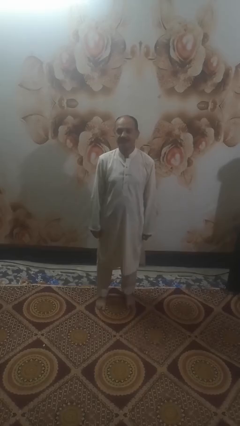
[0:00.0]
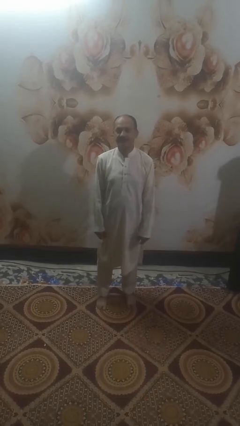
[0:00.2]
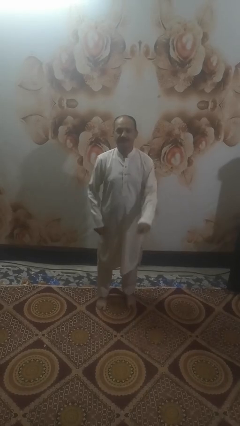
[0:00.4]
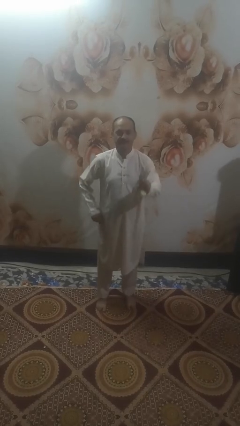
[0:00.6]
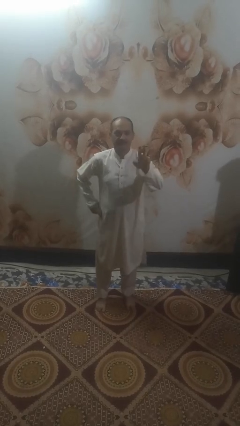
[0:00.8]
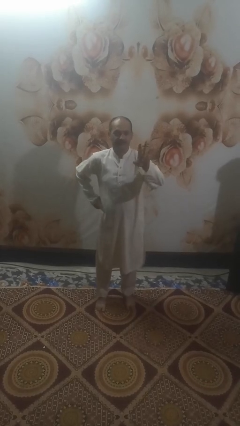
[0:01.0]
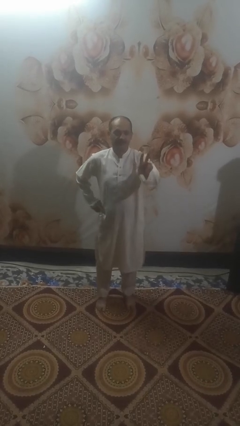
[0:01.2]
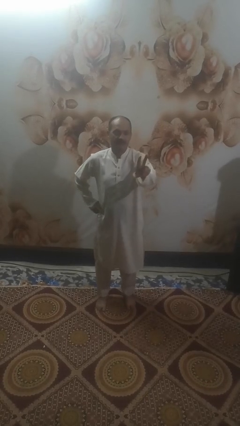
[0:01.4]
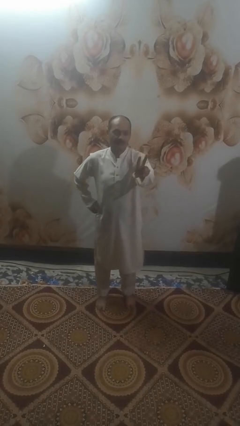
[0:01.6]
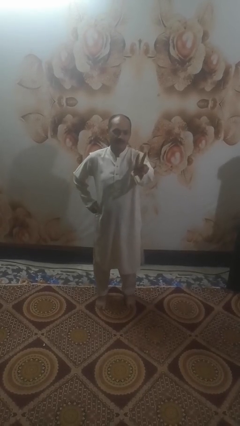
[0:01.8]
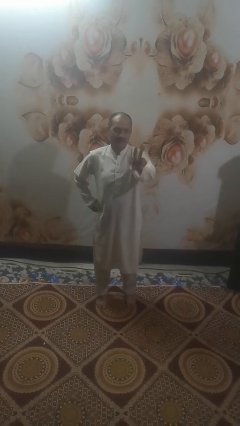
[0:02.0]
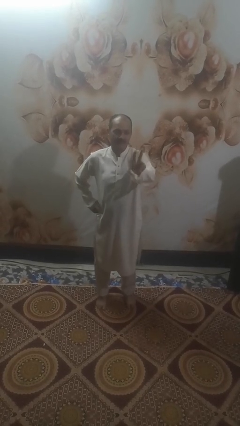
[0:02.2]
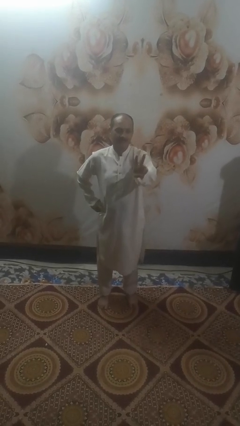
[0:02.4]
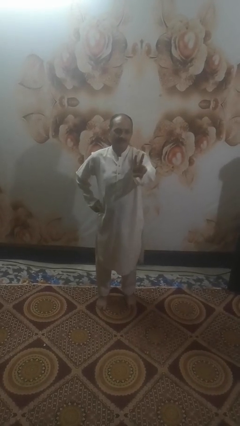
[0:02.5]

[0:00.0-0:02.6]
person gestures peace

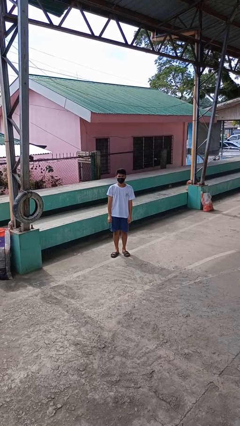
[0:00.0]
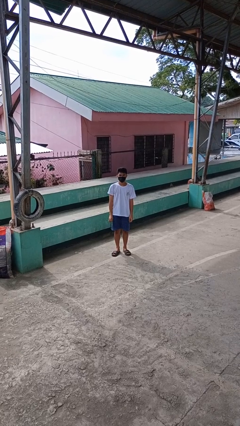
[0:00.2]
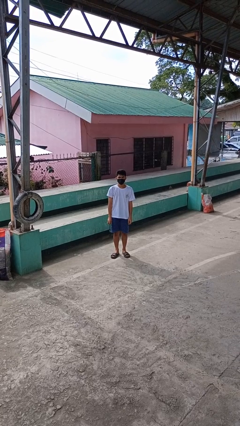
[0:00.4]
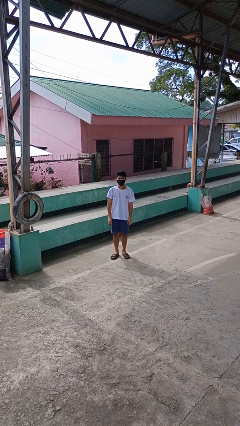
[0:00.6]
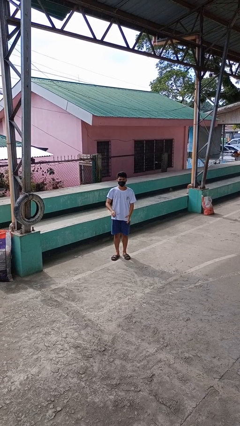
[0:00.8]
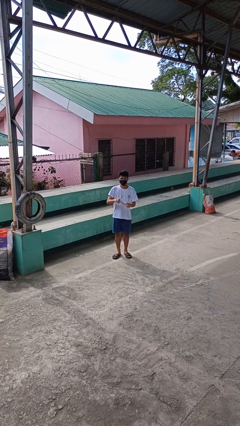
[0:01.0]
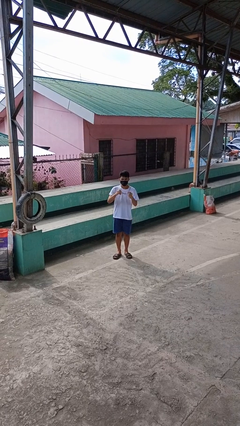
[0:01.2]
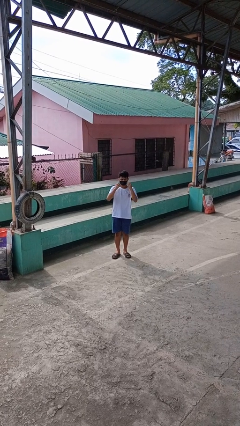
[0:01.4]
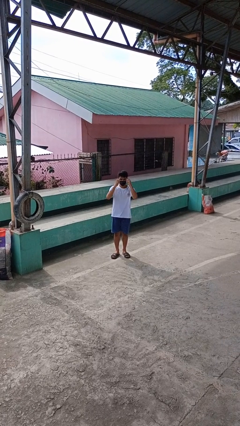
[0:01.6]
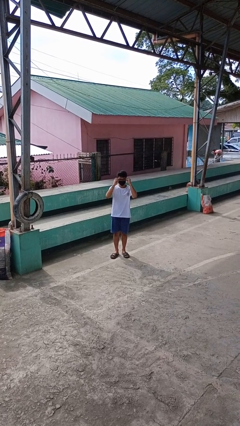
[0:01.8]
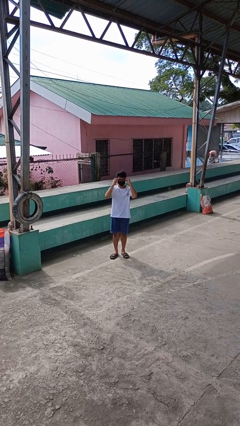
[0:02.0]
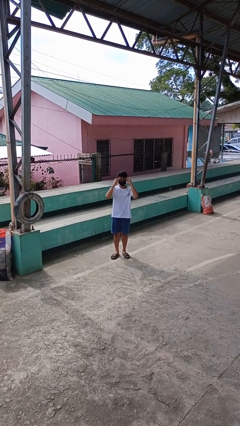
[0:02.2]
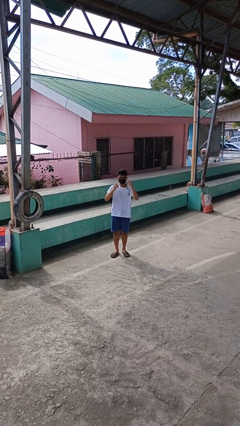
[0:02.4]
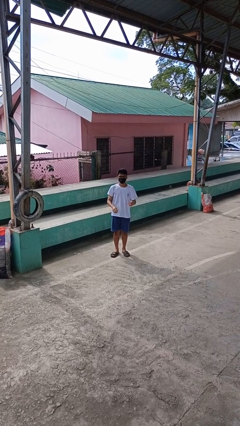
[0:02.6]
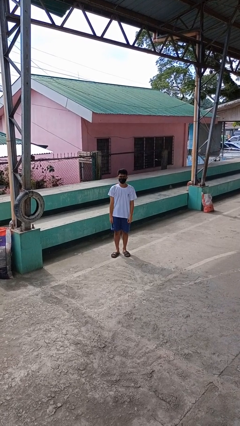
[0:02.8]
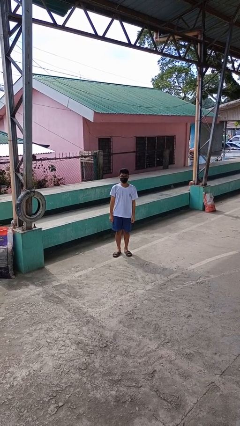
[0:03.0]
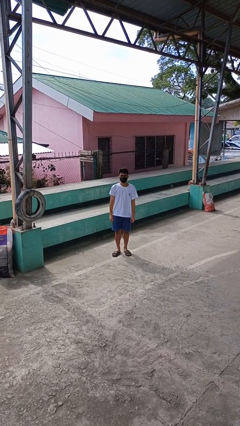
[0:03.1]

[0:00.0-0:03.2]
person puts on glasses

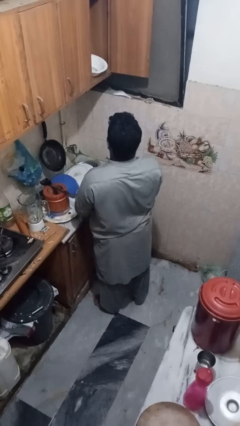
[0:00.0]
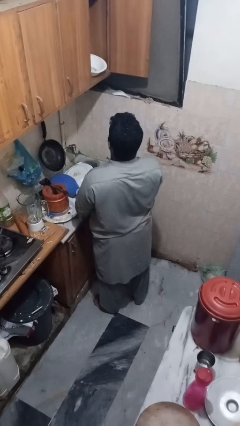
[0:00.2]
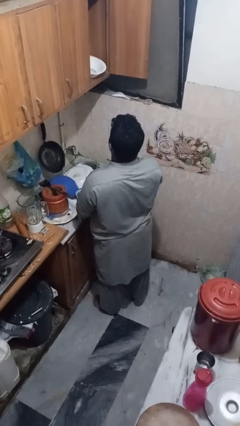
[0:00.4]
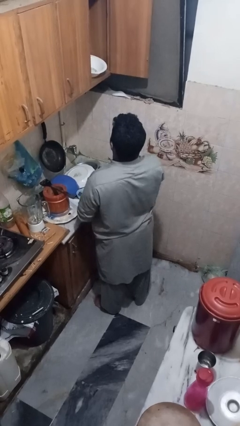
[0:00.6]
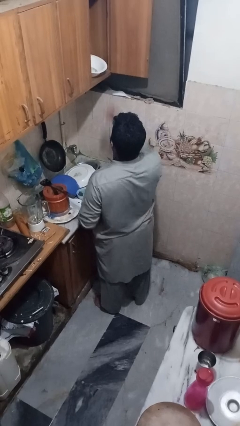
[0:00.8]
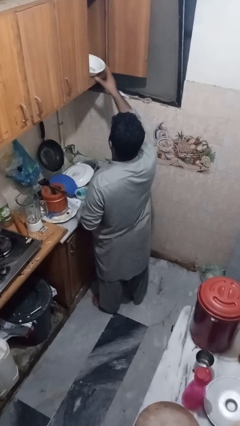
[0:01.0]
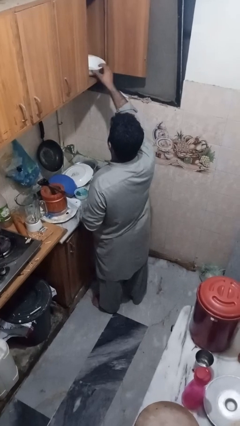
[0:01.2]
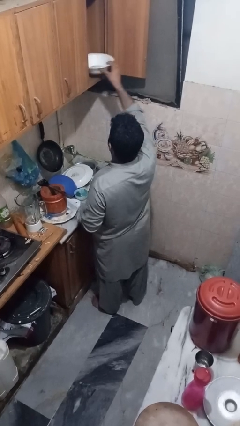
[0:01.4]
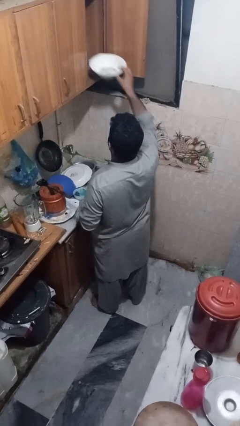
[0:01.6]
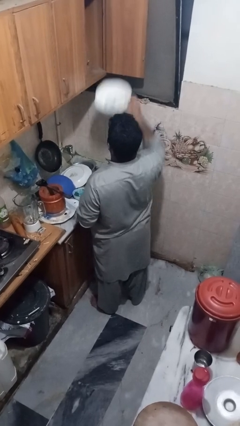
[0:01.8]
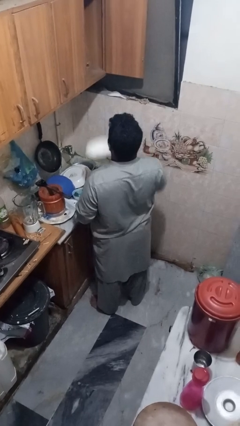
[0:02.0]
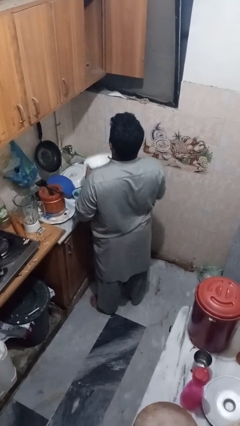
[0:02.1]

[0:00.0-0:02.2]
person takes object from cabinet

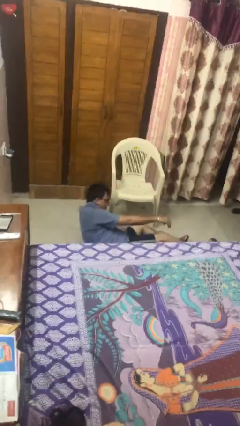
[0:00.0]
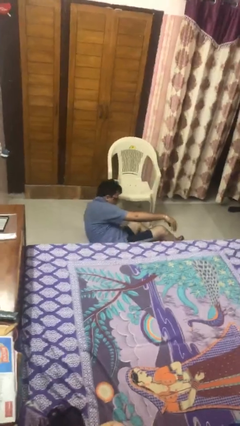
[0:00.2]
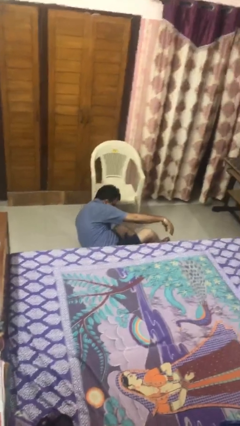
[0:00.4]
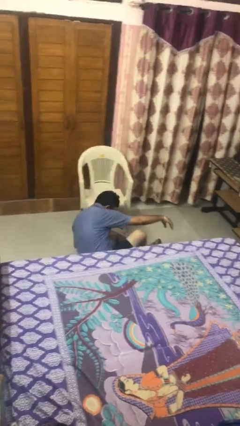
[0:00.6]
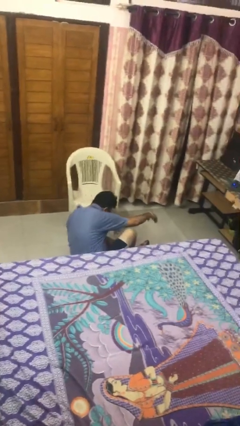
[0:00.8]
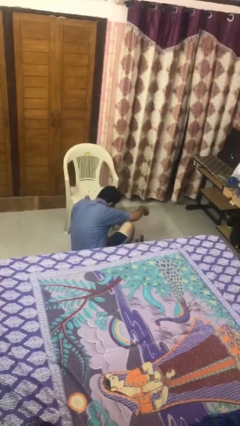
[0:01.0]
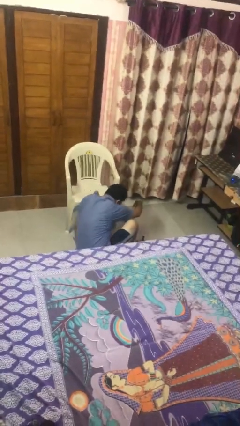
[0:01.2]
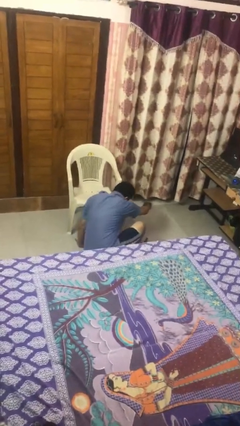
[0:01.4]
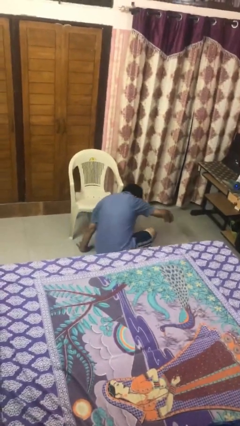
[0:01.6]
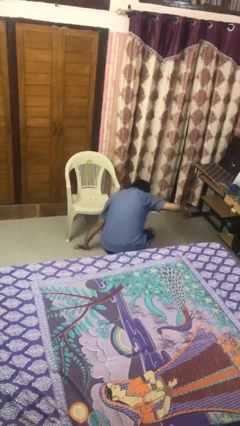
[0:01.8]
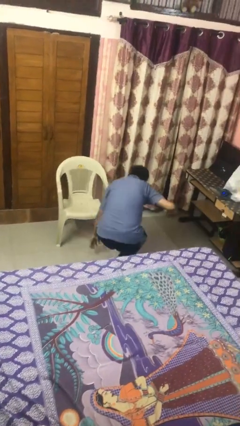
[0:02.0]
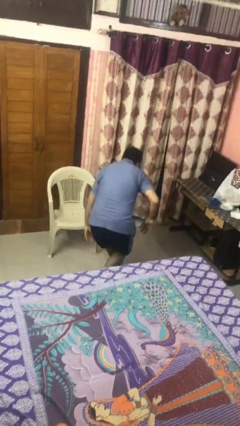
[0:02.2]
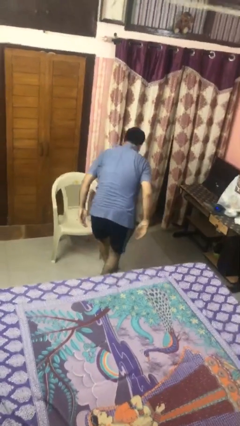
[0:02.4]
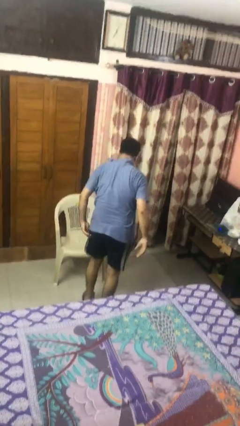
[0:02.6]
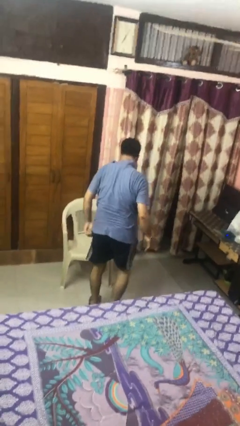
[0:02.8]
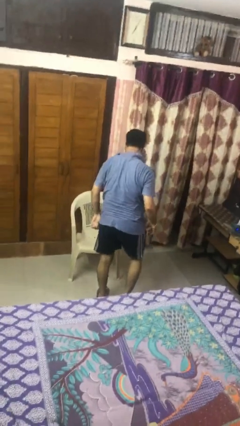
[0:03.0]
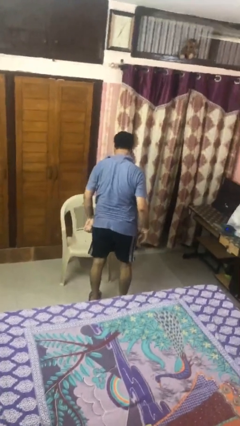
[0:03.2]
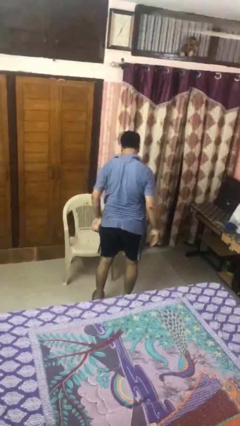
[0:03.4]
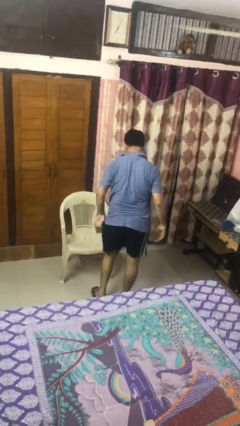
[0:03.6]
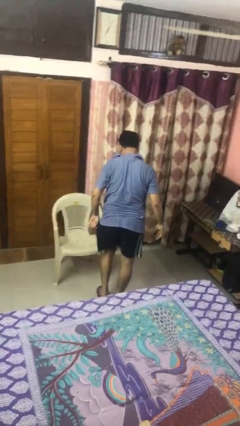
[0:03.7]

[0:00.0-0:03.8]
person stands up from floor

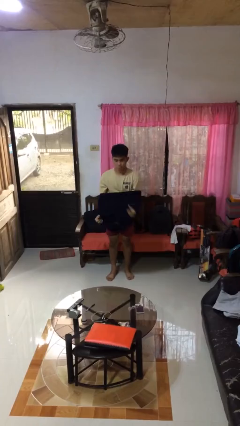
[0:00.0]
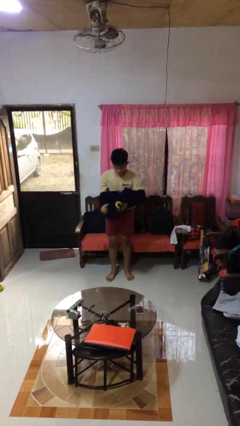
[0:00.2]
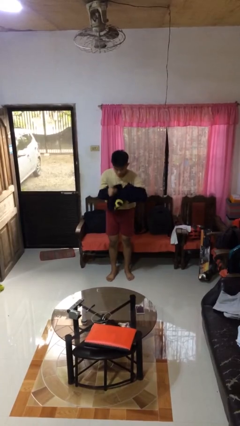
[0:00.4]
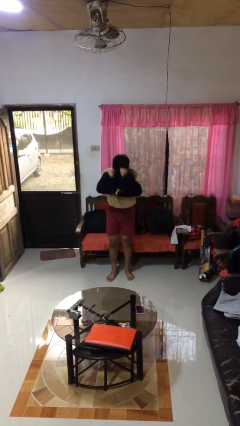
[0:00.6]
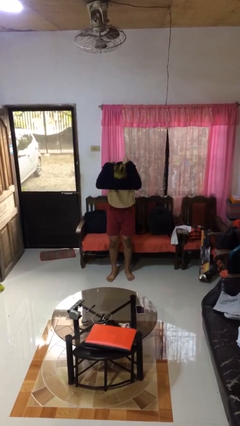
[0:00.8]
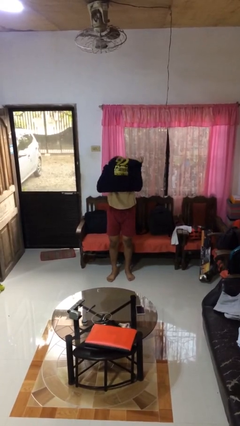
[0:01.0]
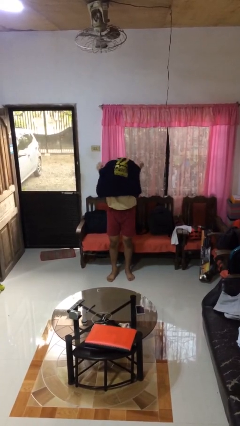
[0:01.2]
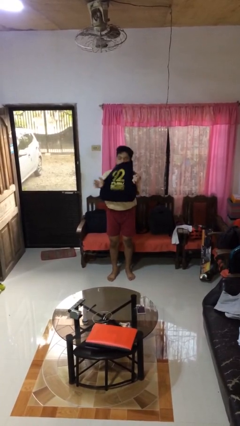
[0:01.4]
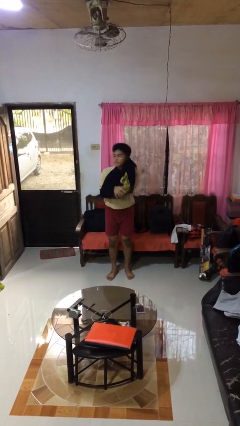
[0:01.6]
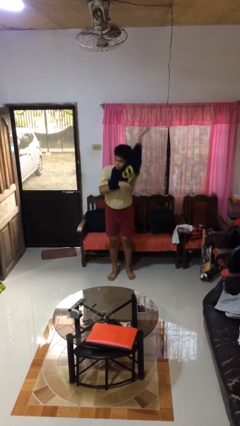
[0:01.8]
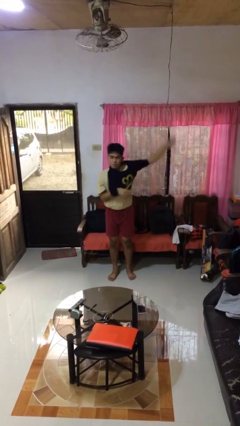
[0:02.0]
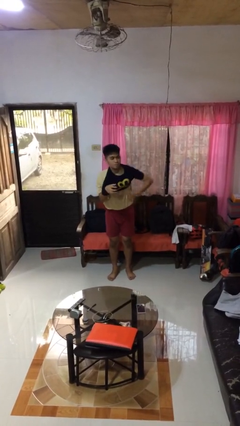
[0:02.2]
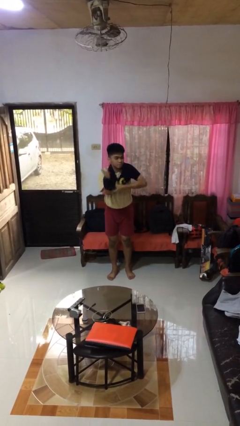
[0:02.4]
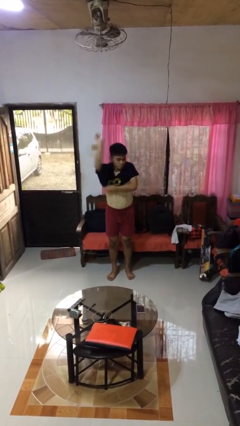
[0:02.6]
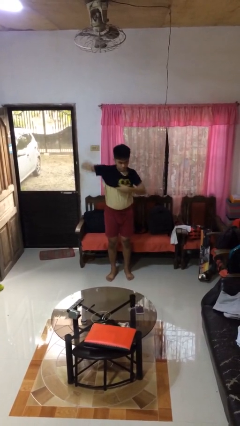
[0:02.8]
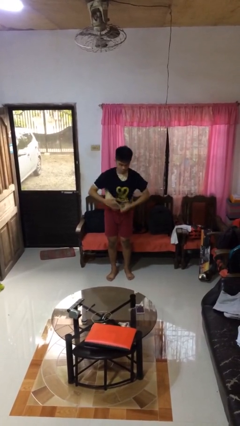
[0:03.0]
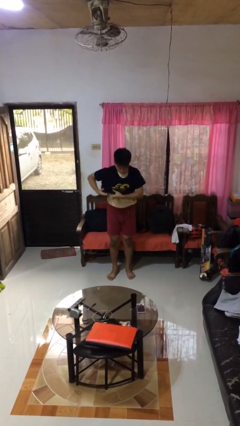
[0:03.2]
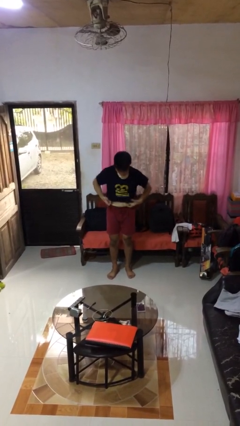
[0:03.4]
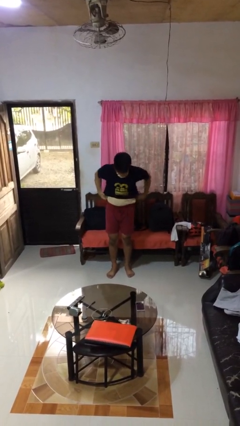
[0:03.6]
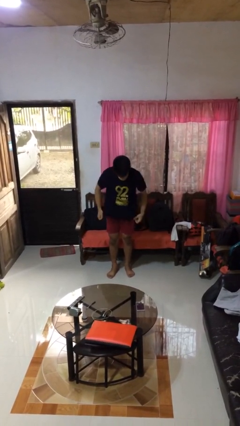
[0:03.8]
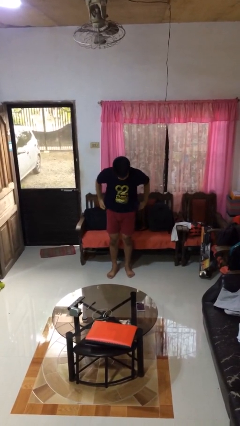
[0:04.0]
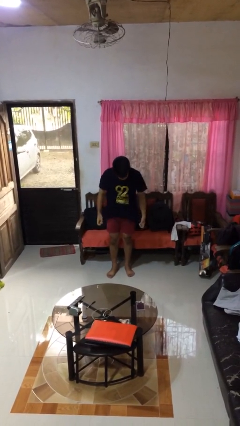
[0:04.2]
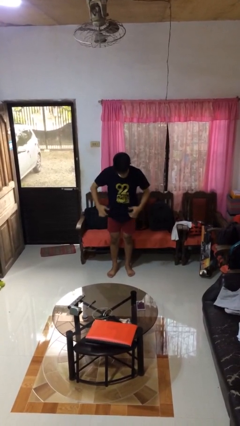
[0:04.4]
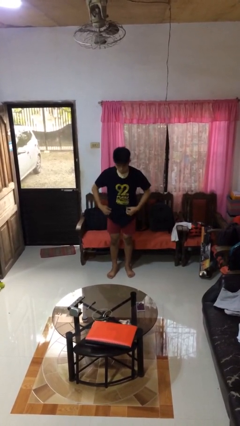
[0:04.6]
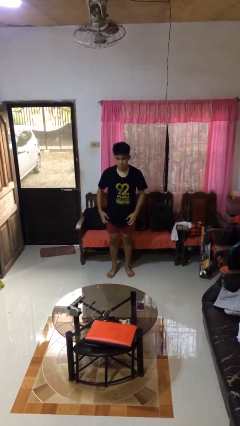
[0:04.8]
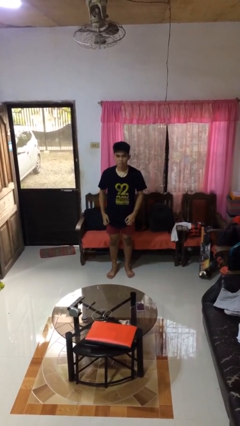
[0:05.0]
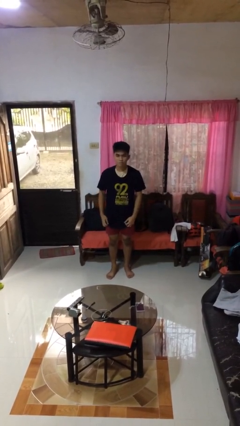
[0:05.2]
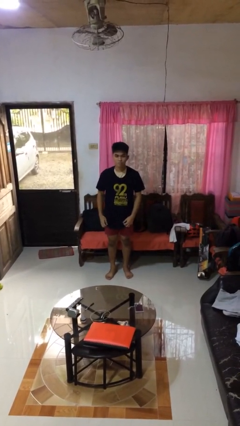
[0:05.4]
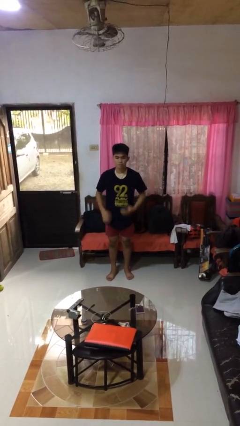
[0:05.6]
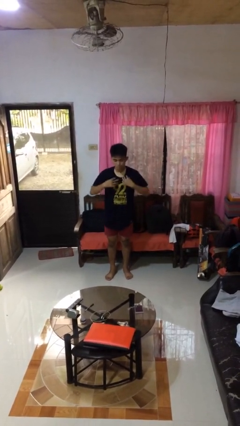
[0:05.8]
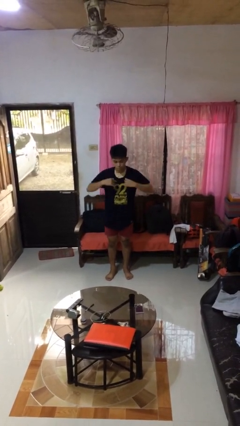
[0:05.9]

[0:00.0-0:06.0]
person puts on shirt
